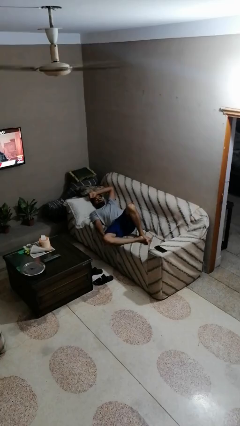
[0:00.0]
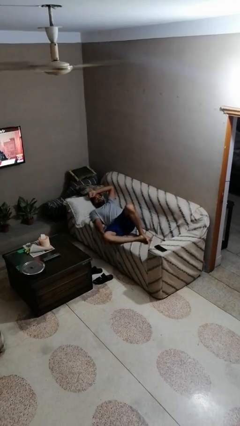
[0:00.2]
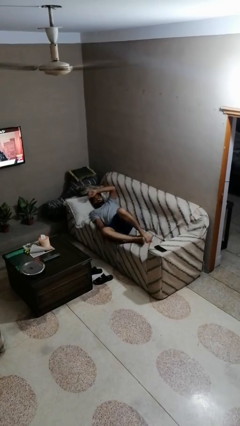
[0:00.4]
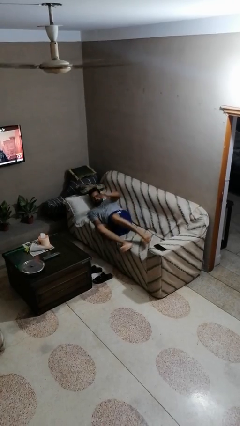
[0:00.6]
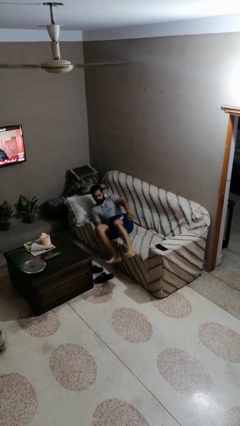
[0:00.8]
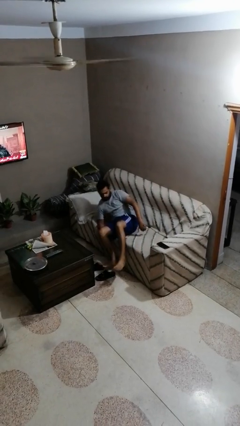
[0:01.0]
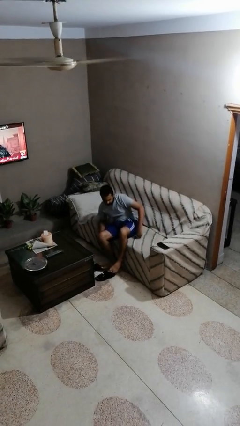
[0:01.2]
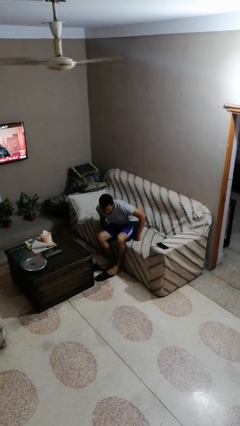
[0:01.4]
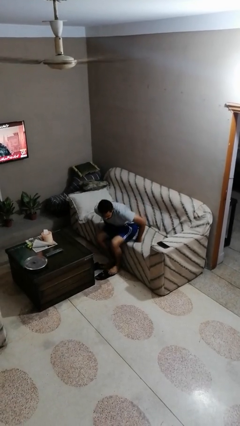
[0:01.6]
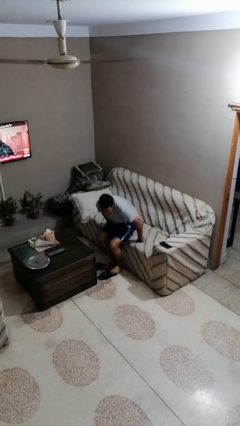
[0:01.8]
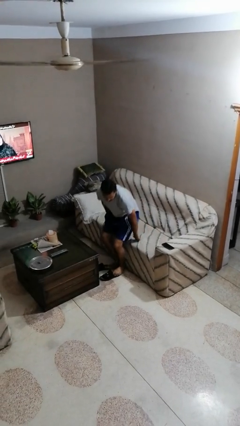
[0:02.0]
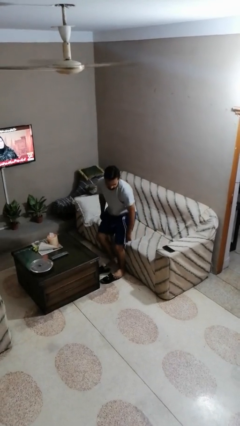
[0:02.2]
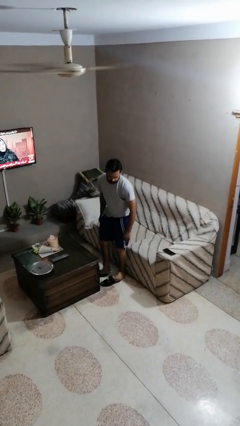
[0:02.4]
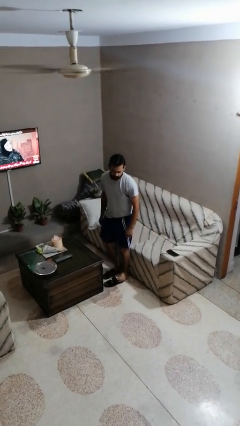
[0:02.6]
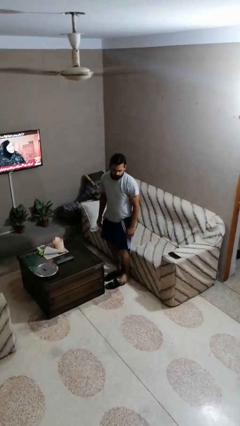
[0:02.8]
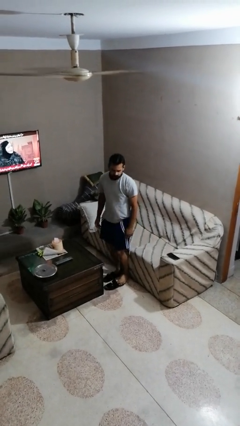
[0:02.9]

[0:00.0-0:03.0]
person stands up

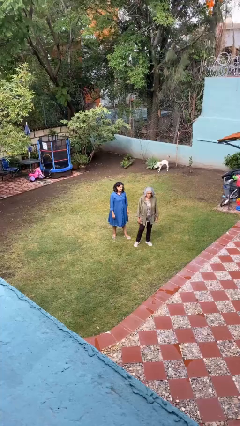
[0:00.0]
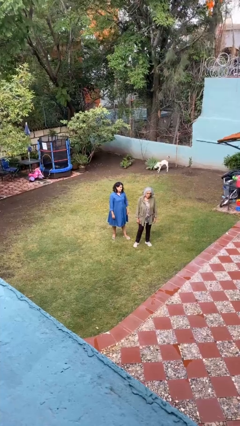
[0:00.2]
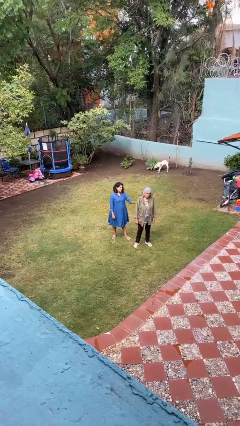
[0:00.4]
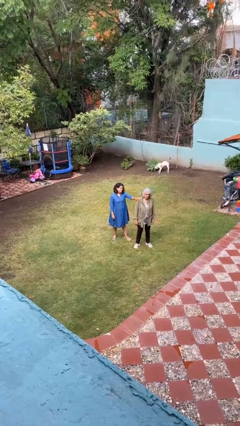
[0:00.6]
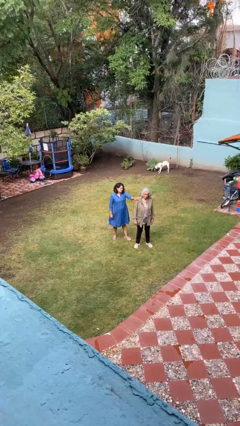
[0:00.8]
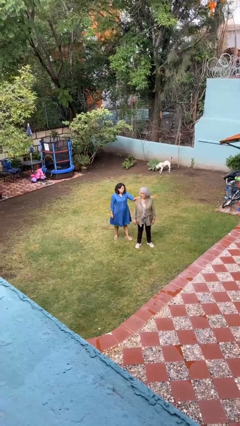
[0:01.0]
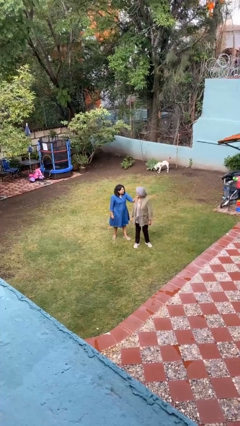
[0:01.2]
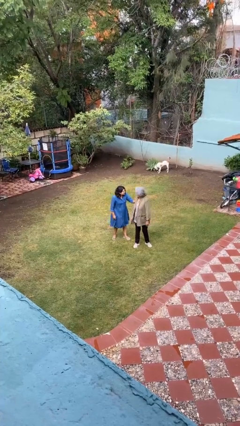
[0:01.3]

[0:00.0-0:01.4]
person grabs person by shoulder

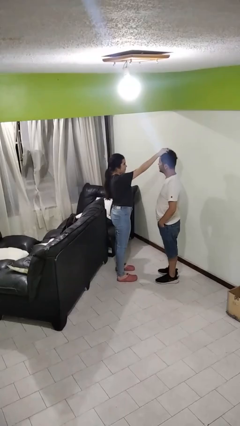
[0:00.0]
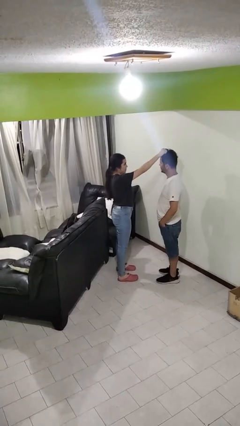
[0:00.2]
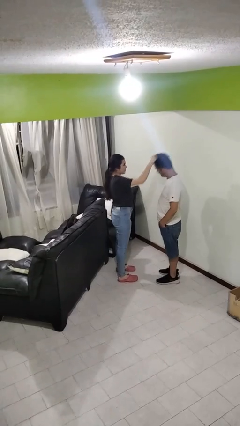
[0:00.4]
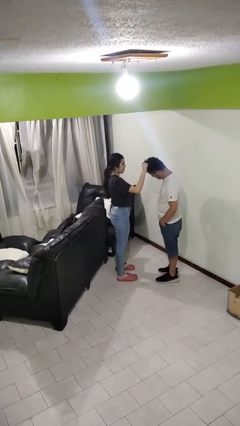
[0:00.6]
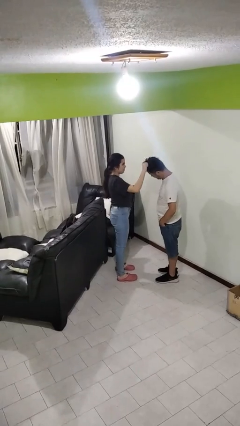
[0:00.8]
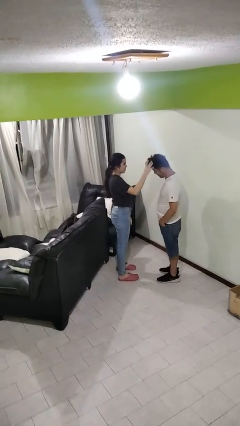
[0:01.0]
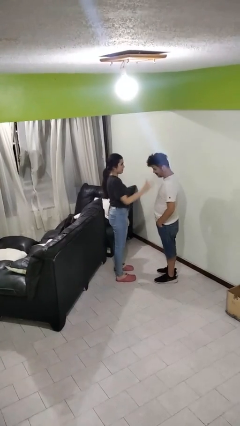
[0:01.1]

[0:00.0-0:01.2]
person grabs person by hair

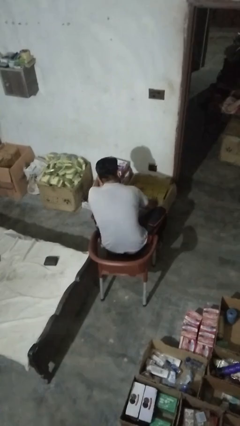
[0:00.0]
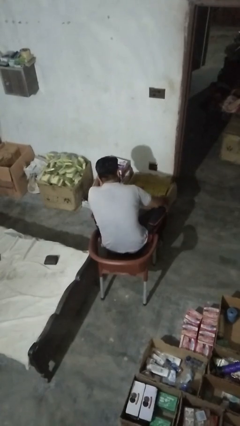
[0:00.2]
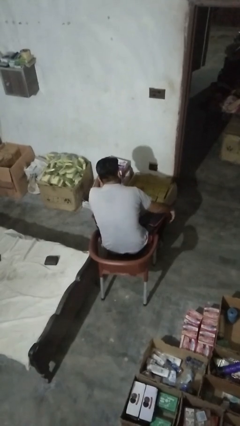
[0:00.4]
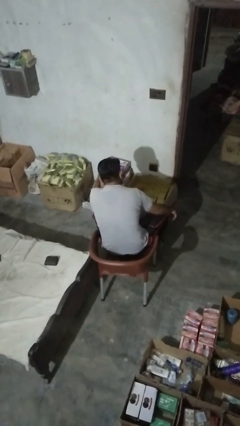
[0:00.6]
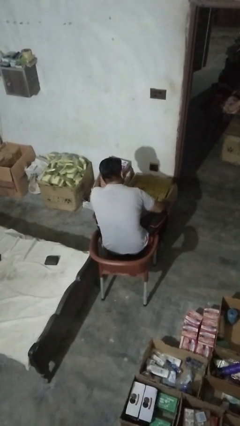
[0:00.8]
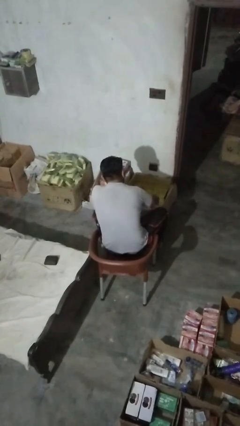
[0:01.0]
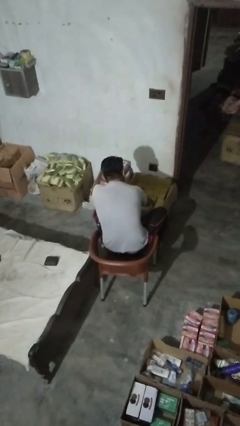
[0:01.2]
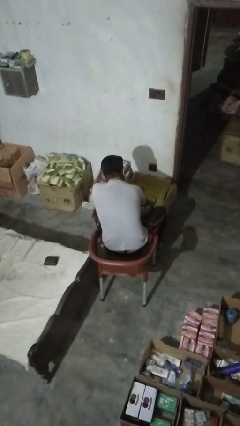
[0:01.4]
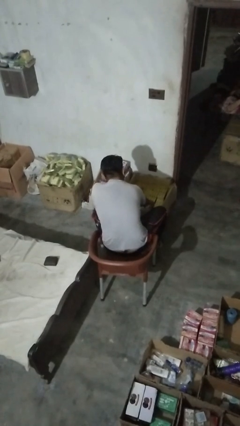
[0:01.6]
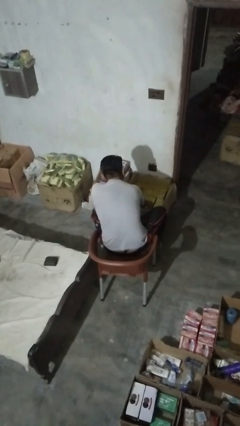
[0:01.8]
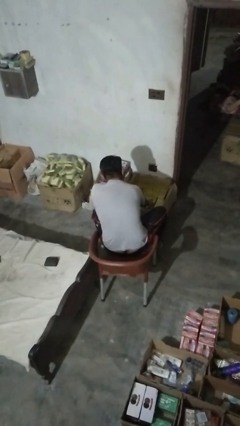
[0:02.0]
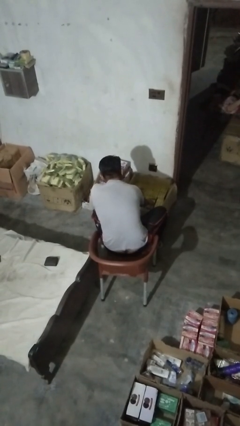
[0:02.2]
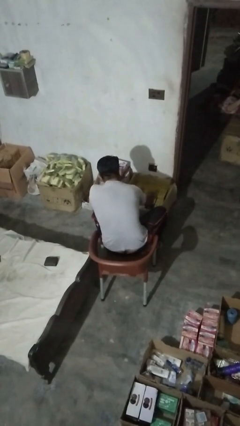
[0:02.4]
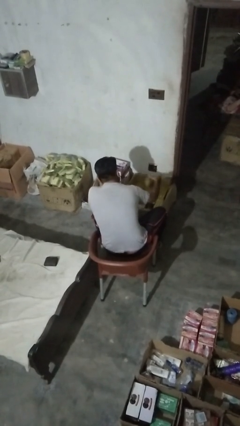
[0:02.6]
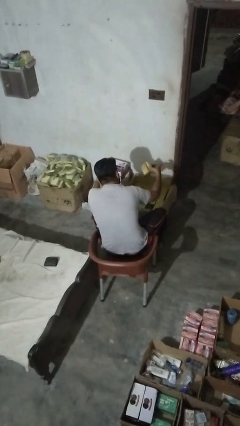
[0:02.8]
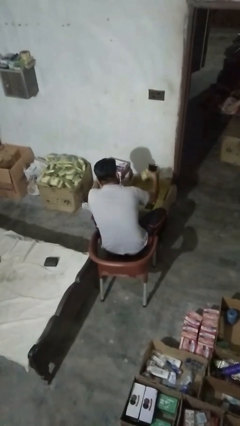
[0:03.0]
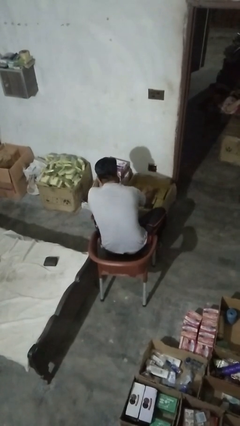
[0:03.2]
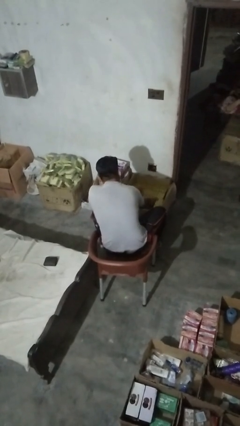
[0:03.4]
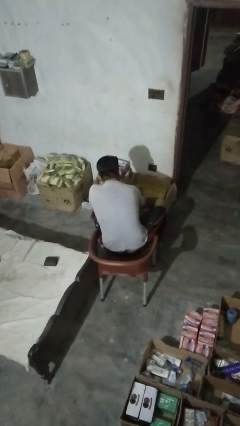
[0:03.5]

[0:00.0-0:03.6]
person searches in box

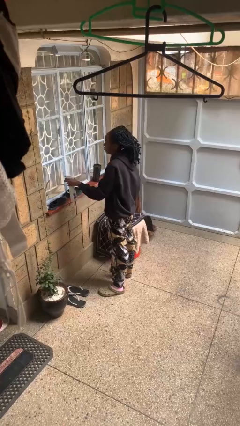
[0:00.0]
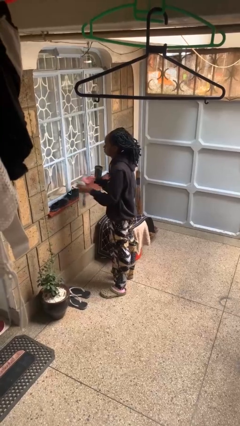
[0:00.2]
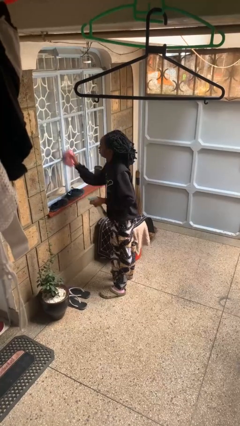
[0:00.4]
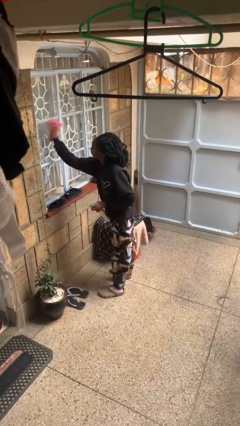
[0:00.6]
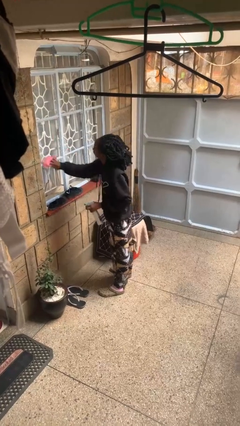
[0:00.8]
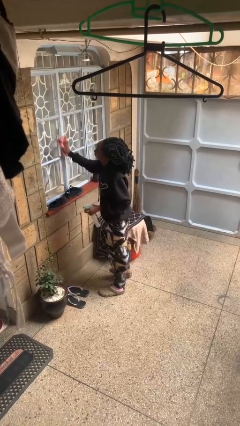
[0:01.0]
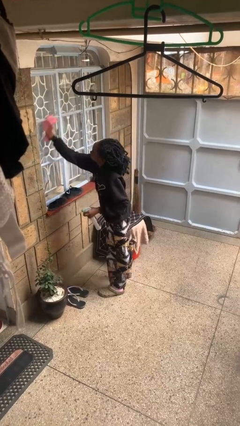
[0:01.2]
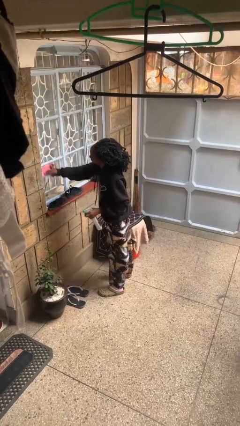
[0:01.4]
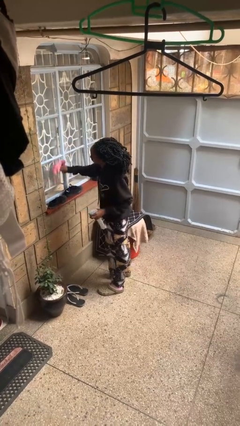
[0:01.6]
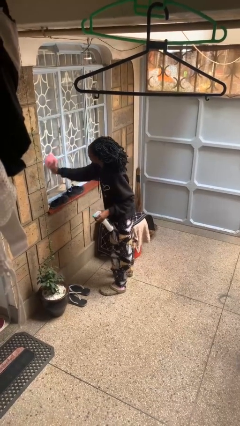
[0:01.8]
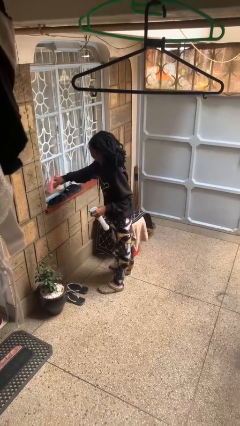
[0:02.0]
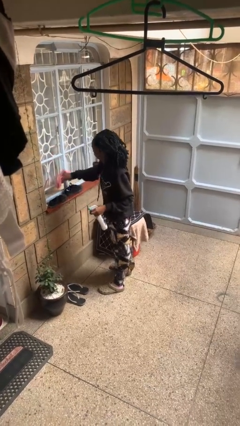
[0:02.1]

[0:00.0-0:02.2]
person washes window

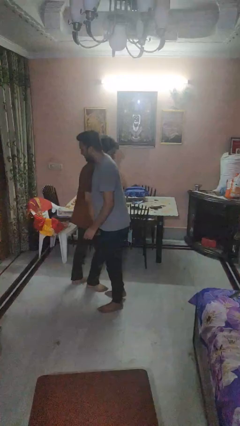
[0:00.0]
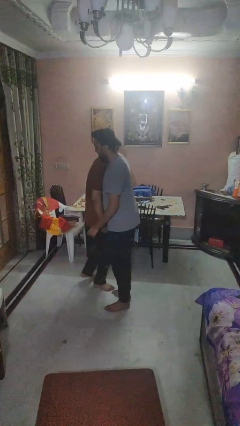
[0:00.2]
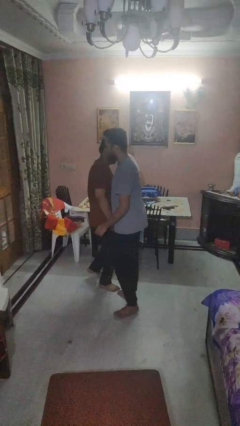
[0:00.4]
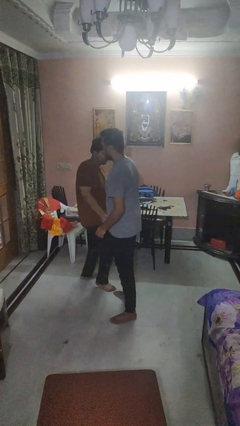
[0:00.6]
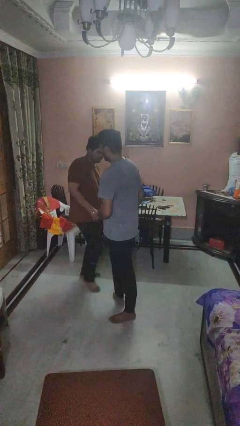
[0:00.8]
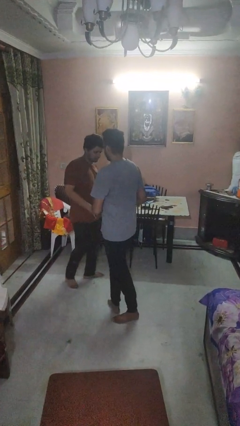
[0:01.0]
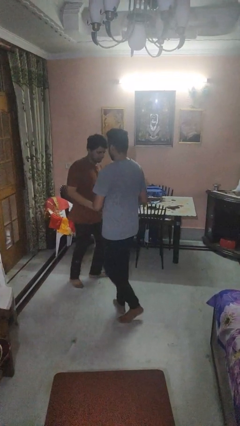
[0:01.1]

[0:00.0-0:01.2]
person bumps into person

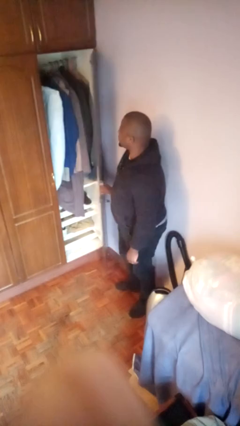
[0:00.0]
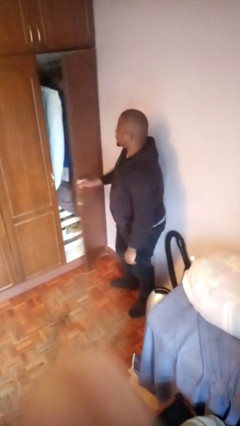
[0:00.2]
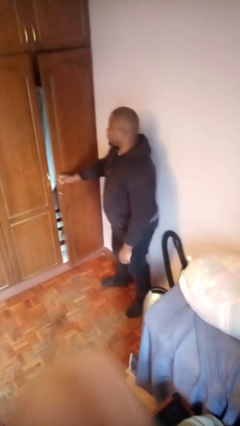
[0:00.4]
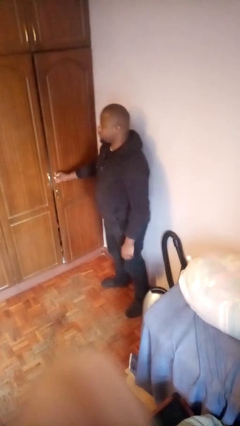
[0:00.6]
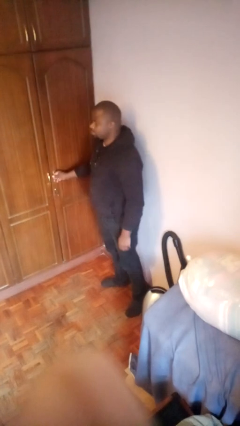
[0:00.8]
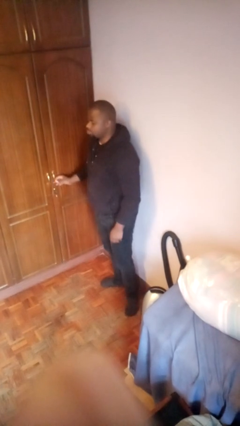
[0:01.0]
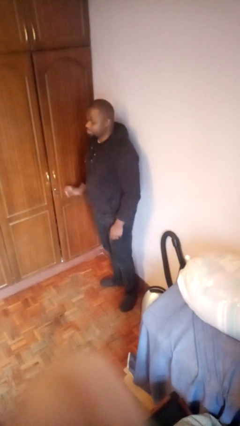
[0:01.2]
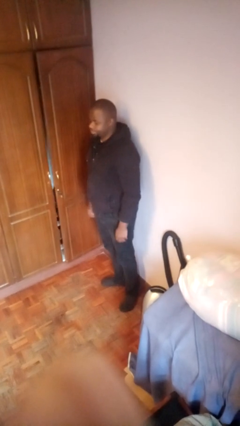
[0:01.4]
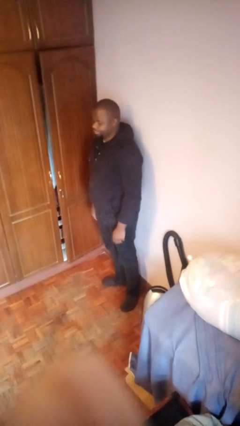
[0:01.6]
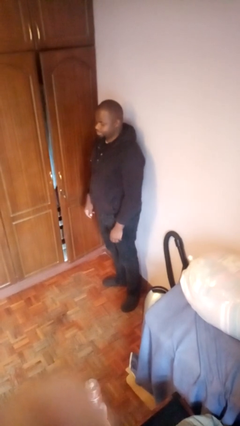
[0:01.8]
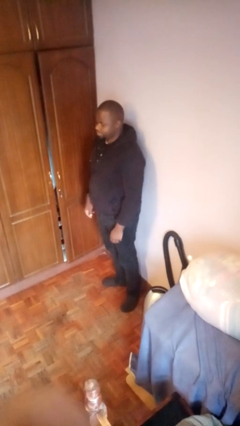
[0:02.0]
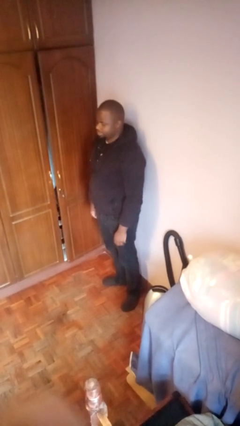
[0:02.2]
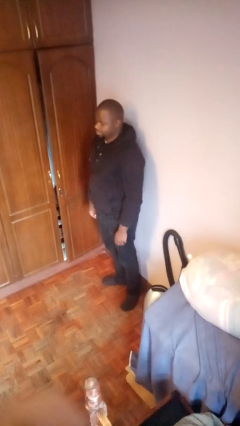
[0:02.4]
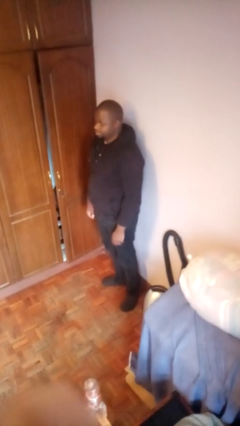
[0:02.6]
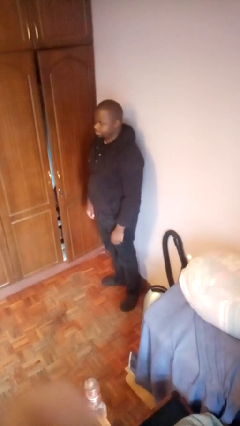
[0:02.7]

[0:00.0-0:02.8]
person closes closet door

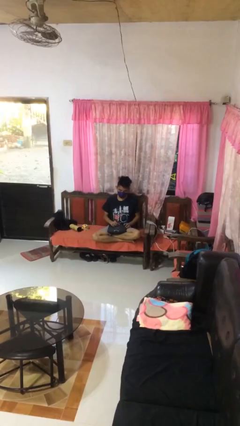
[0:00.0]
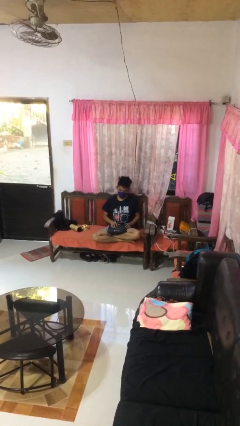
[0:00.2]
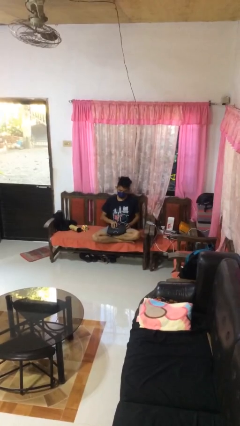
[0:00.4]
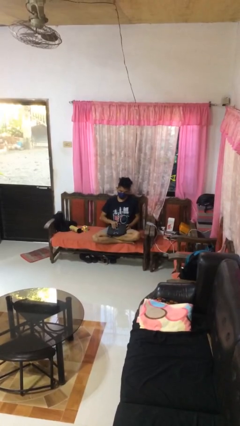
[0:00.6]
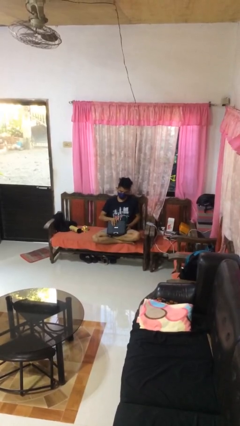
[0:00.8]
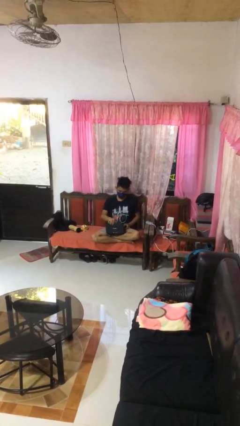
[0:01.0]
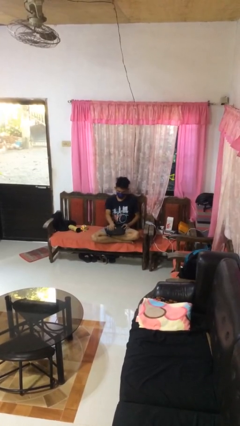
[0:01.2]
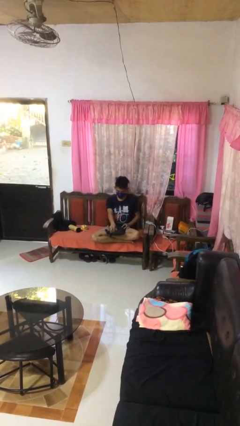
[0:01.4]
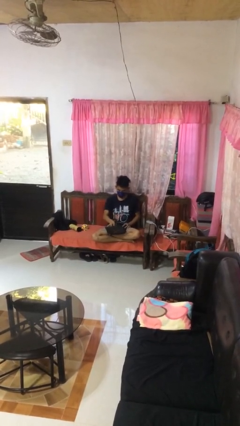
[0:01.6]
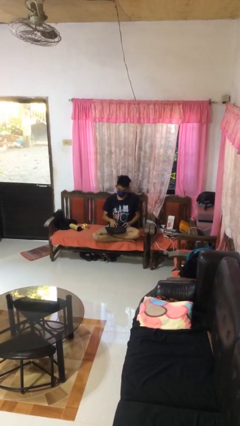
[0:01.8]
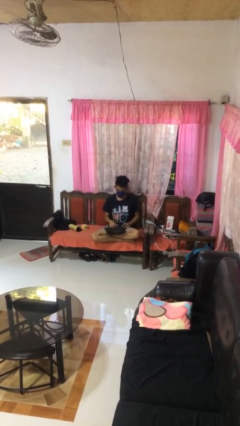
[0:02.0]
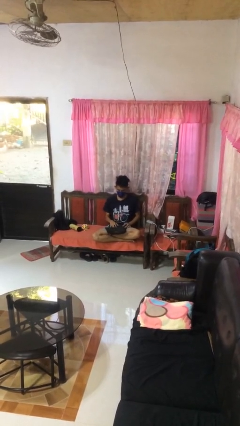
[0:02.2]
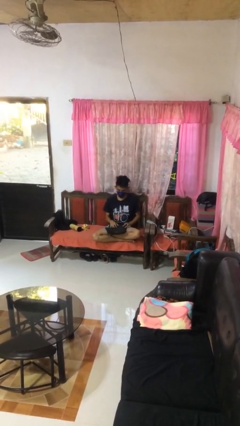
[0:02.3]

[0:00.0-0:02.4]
person opens laptop
